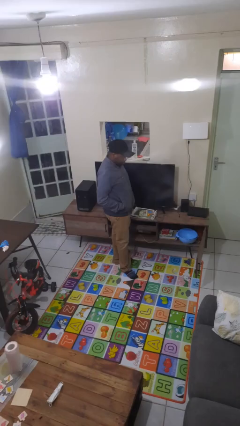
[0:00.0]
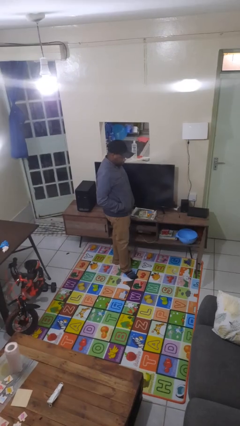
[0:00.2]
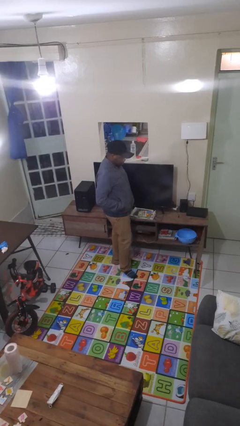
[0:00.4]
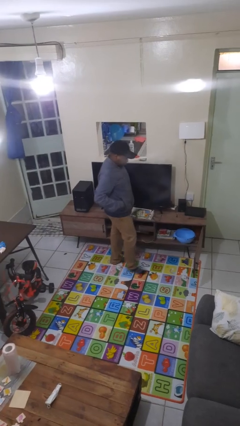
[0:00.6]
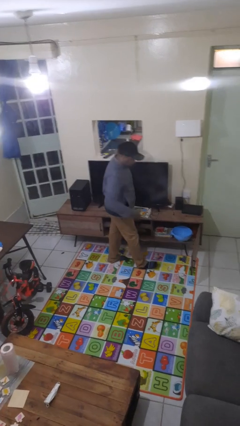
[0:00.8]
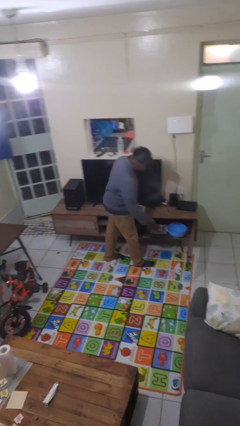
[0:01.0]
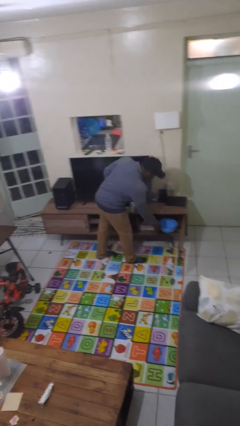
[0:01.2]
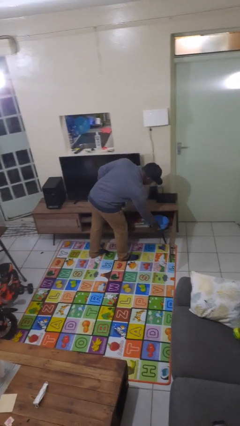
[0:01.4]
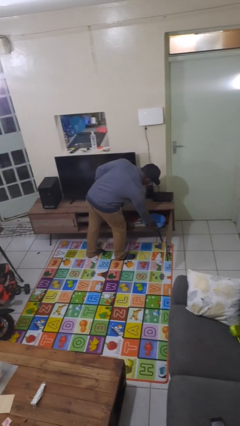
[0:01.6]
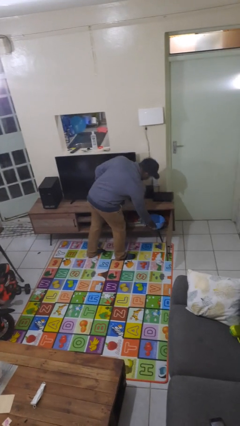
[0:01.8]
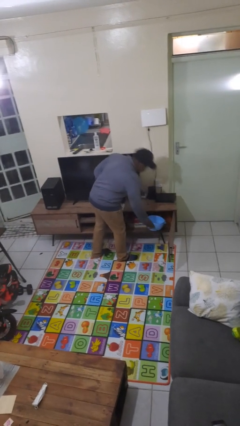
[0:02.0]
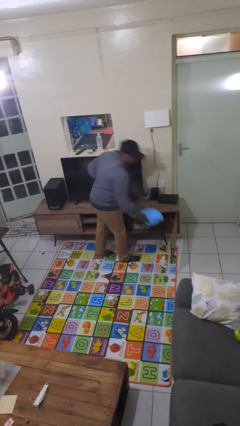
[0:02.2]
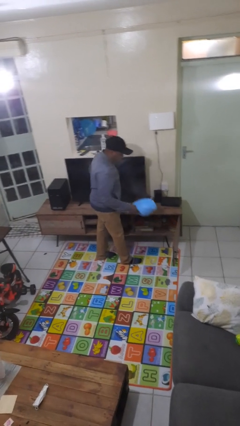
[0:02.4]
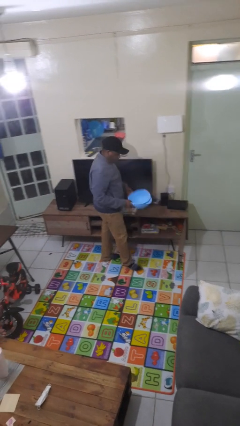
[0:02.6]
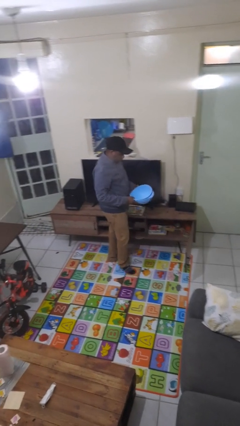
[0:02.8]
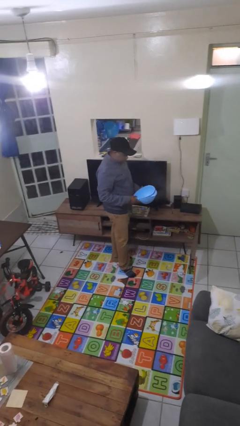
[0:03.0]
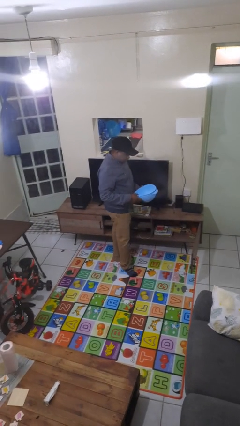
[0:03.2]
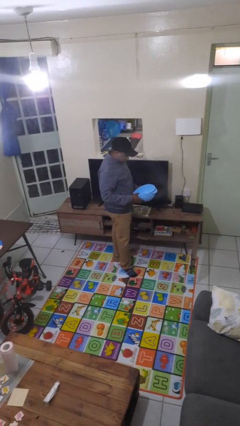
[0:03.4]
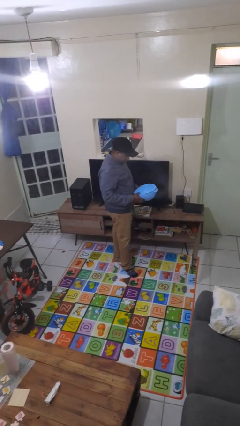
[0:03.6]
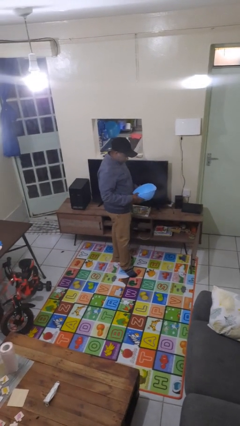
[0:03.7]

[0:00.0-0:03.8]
person picks up object from cabinet

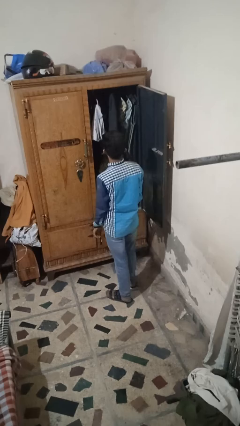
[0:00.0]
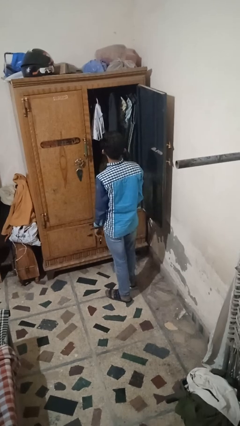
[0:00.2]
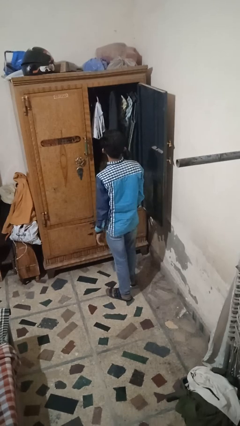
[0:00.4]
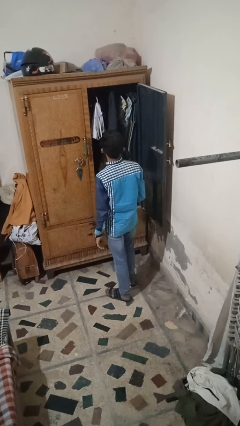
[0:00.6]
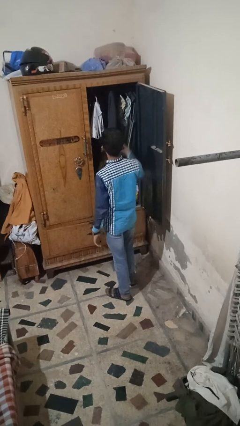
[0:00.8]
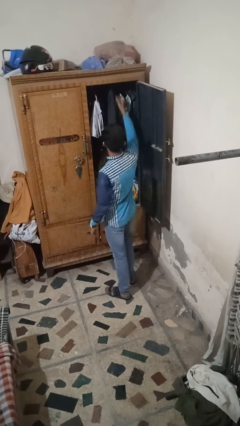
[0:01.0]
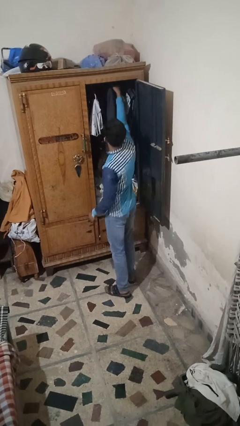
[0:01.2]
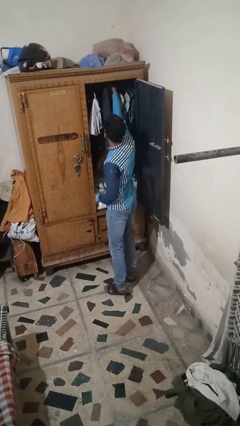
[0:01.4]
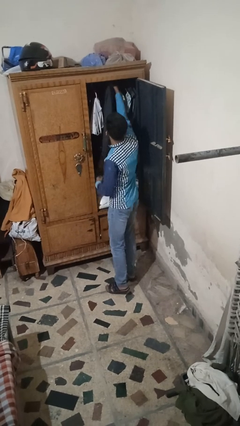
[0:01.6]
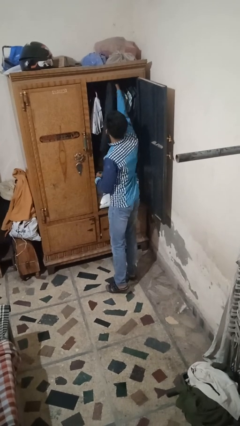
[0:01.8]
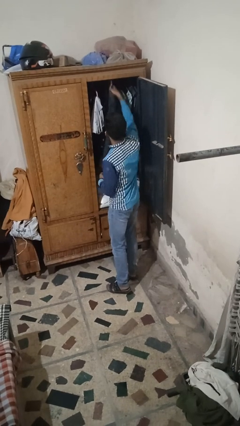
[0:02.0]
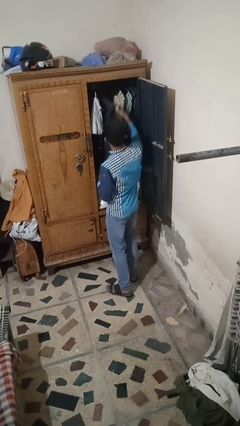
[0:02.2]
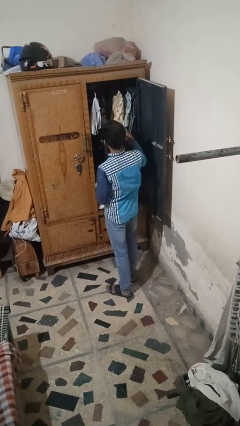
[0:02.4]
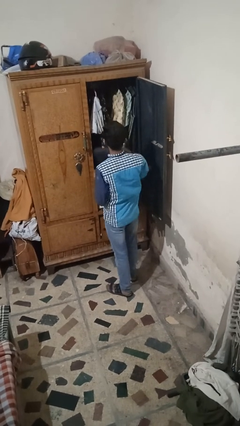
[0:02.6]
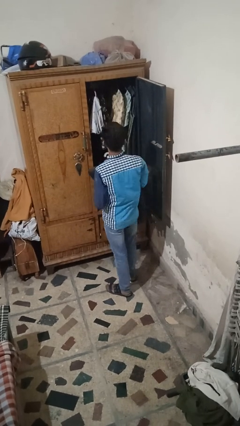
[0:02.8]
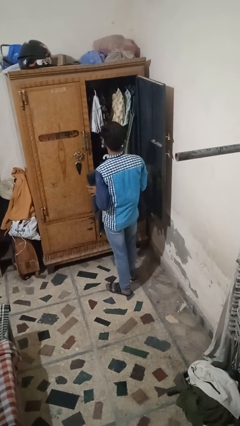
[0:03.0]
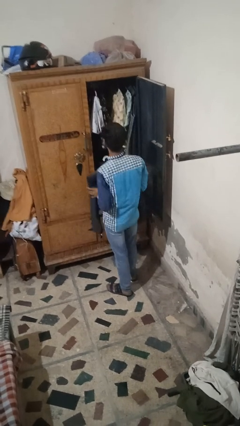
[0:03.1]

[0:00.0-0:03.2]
person takes clothes from closet

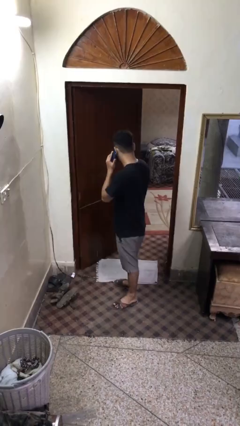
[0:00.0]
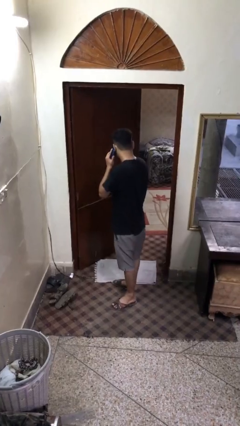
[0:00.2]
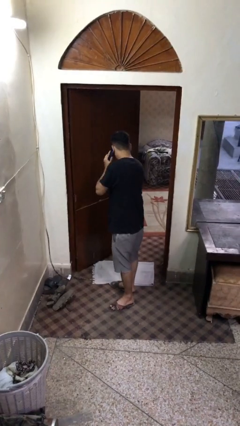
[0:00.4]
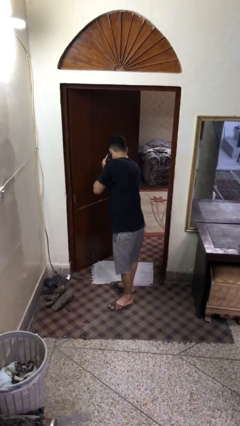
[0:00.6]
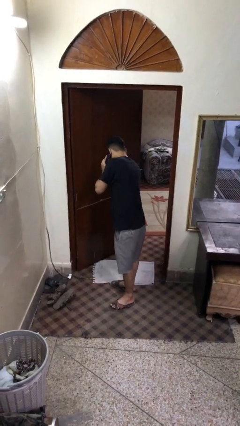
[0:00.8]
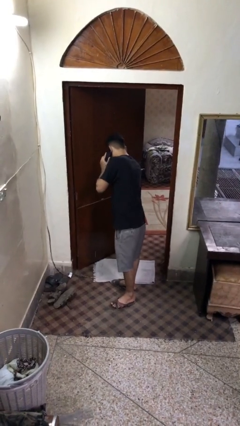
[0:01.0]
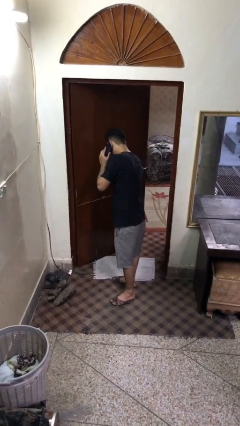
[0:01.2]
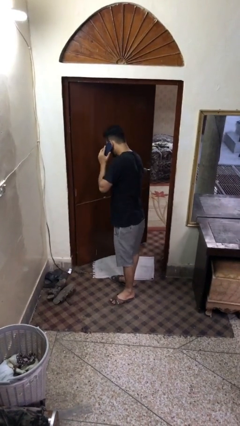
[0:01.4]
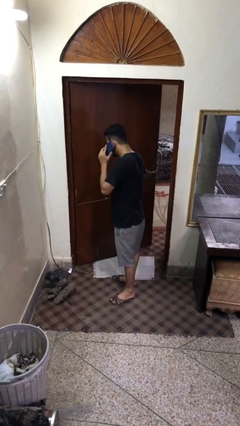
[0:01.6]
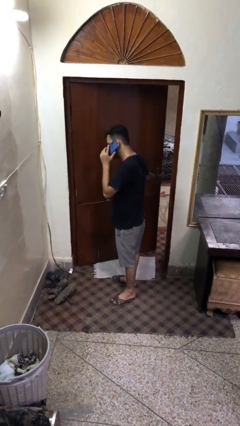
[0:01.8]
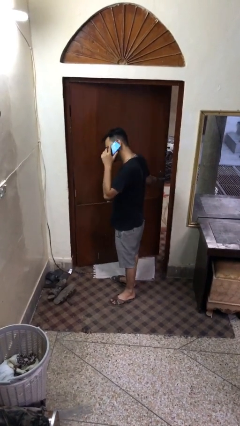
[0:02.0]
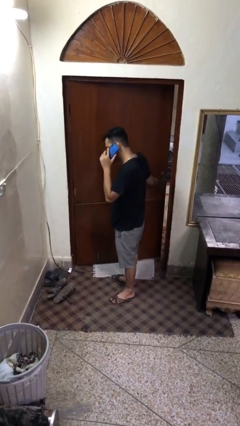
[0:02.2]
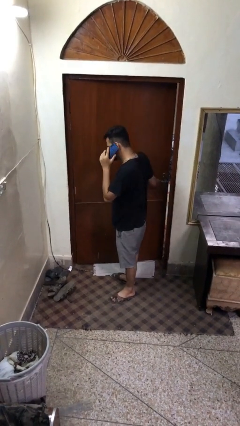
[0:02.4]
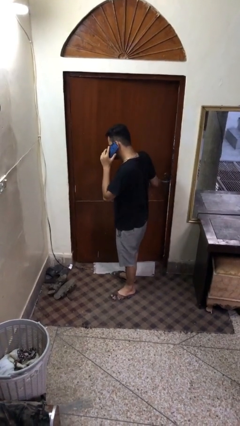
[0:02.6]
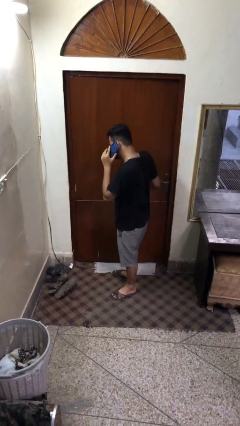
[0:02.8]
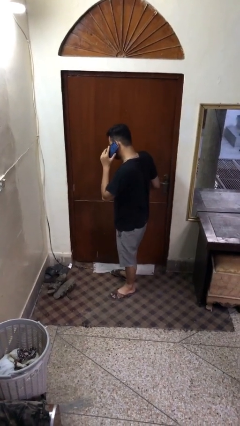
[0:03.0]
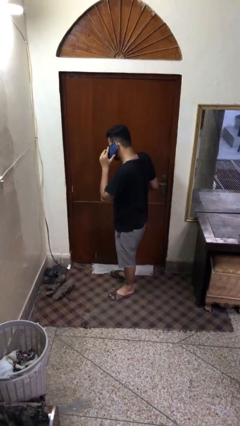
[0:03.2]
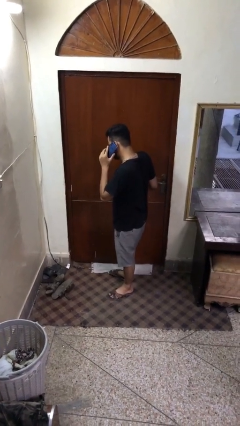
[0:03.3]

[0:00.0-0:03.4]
person closes facility door

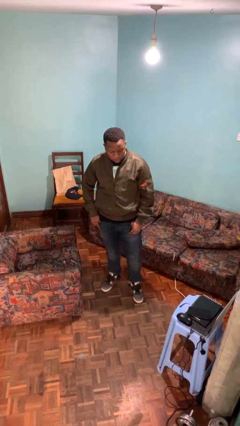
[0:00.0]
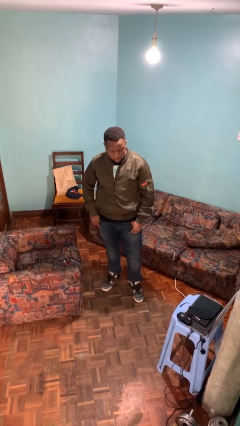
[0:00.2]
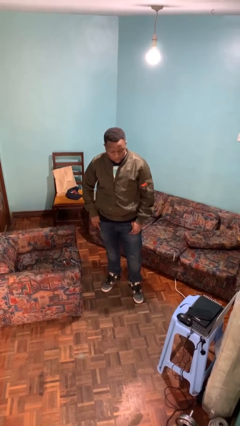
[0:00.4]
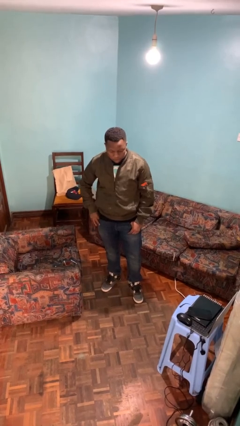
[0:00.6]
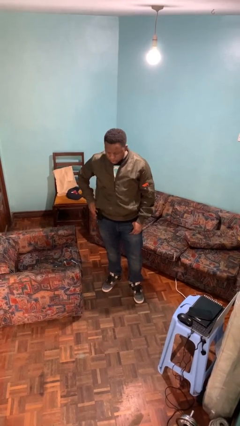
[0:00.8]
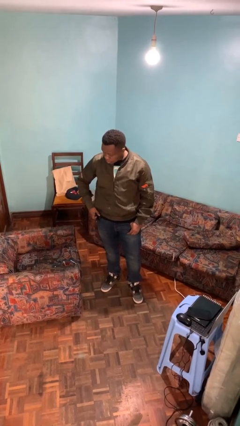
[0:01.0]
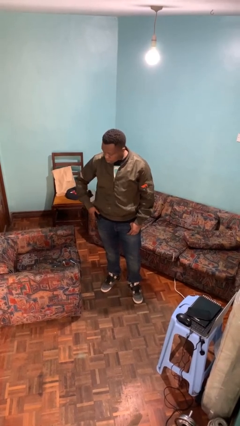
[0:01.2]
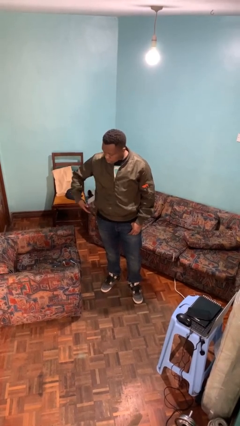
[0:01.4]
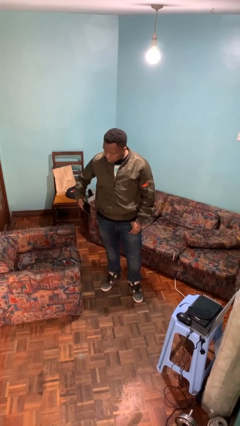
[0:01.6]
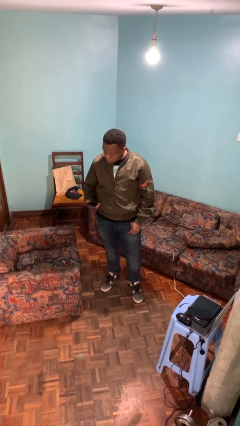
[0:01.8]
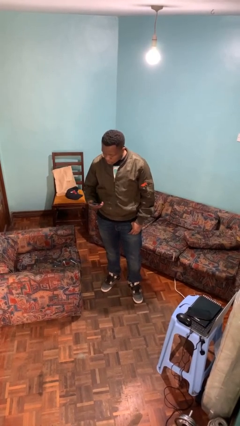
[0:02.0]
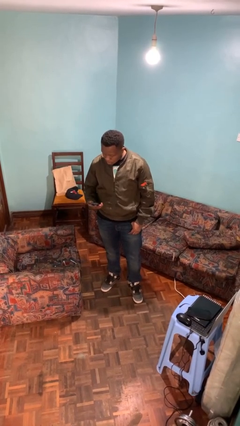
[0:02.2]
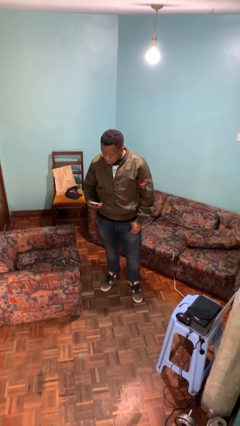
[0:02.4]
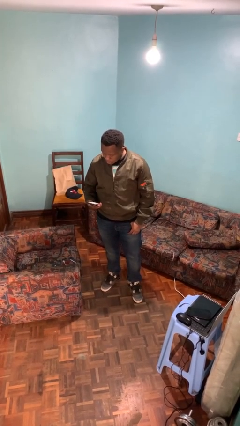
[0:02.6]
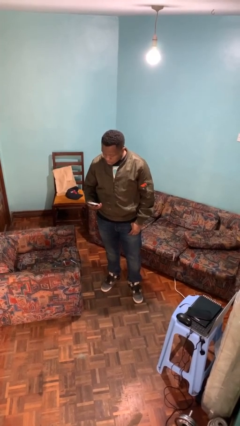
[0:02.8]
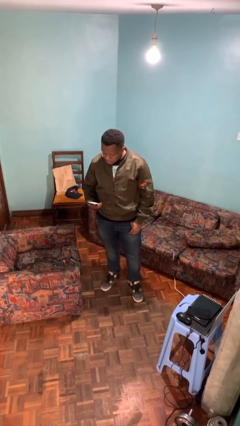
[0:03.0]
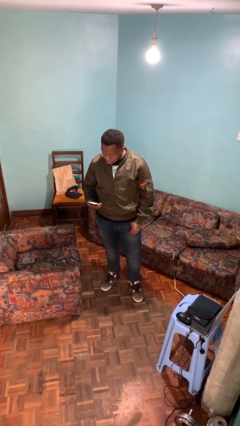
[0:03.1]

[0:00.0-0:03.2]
person takes phone from pocket

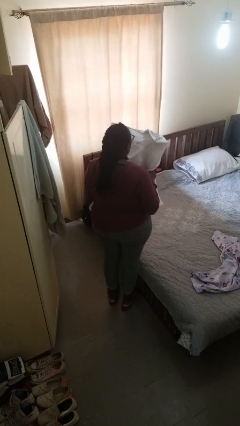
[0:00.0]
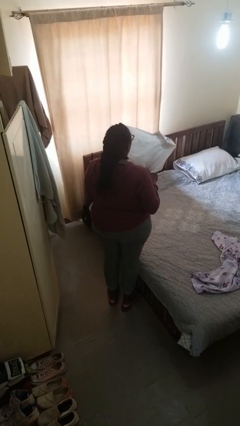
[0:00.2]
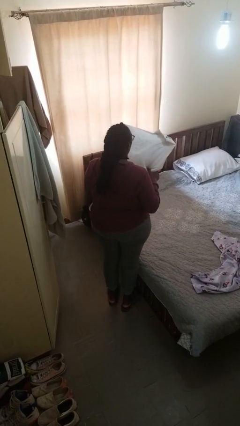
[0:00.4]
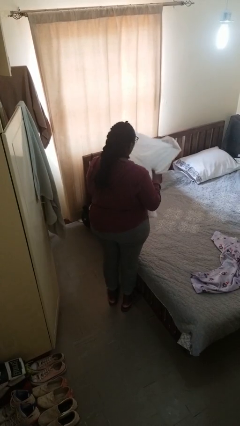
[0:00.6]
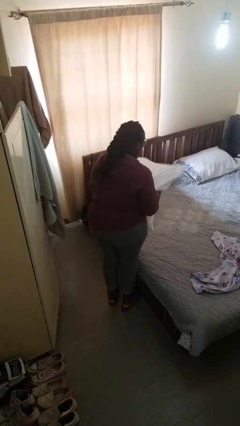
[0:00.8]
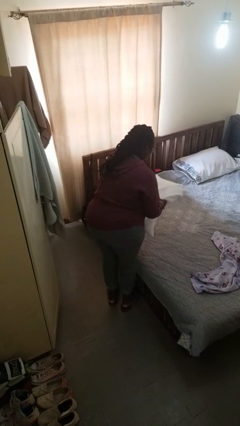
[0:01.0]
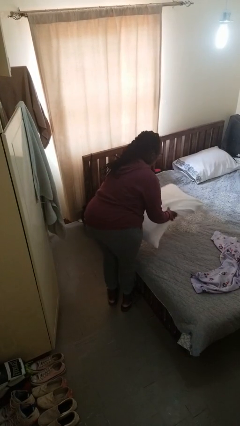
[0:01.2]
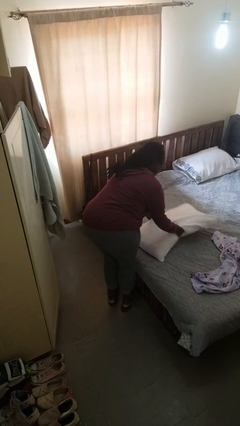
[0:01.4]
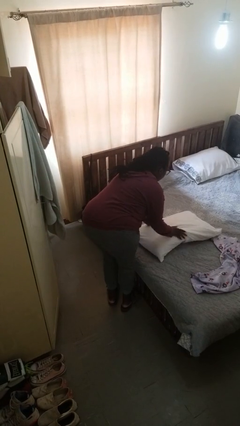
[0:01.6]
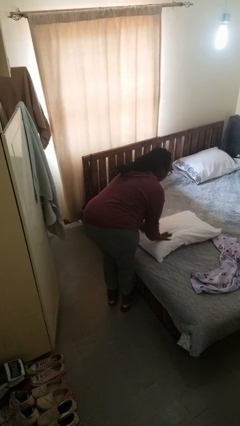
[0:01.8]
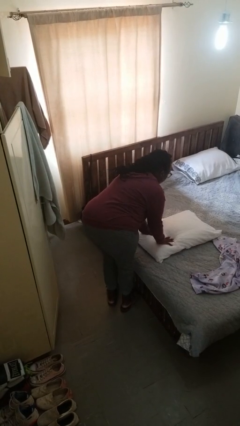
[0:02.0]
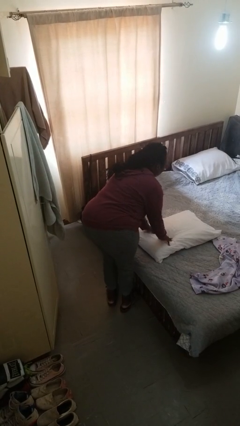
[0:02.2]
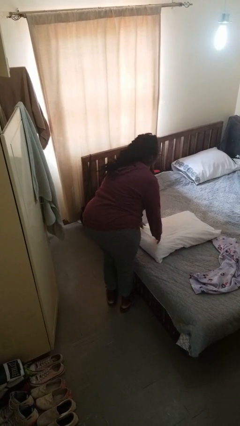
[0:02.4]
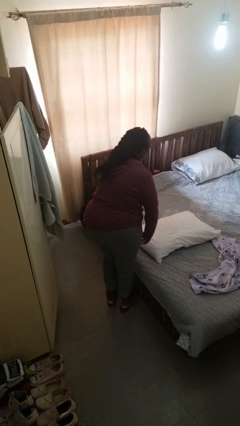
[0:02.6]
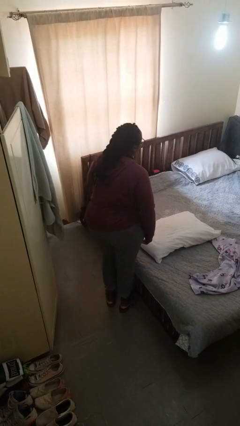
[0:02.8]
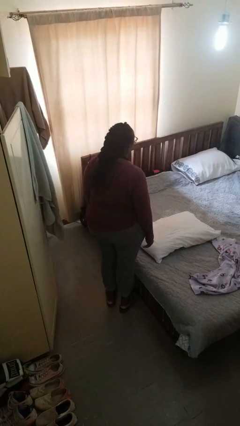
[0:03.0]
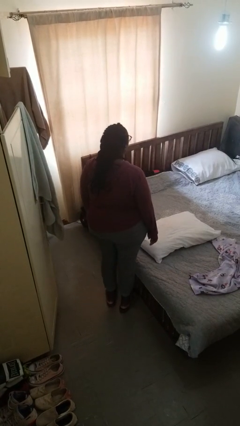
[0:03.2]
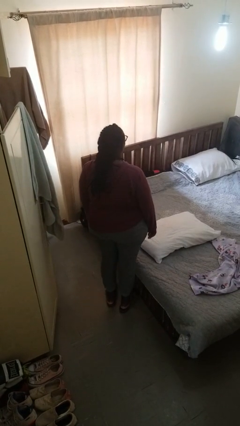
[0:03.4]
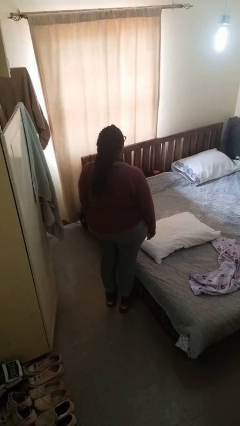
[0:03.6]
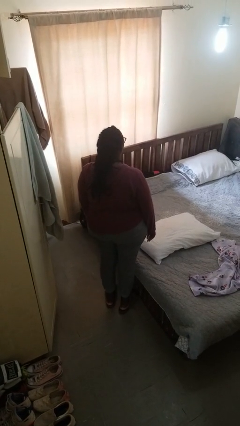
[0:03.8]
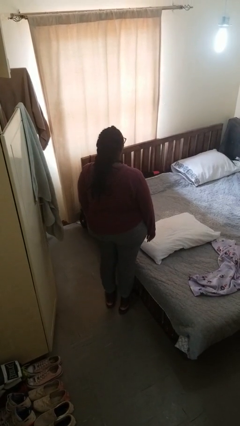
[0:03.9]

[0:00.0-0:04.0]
person puts down object on bed

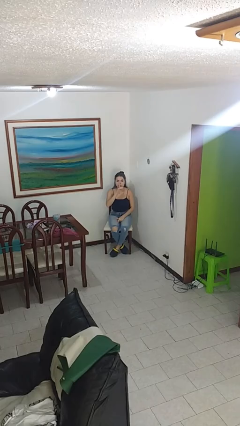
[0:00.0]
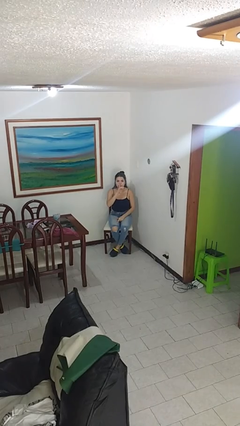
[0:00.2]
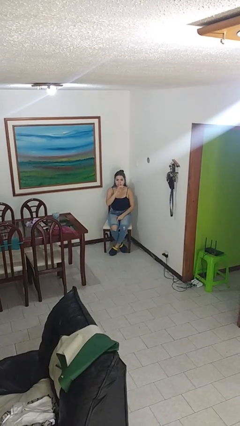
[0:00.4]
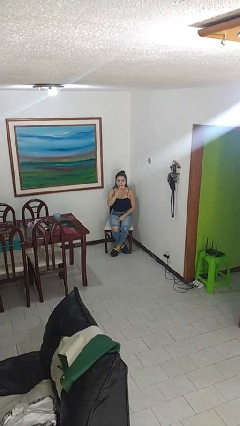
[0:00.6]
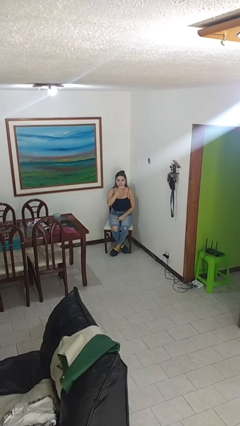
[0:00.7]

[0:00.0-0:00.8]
person gestures be quiet
